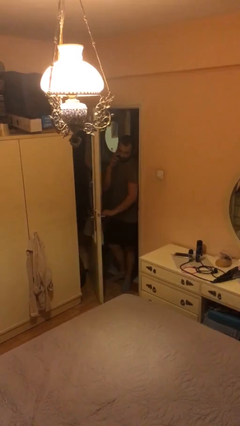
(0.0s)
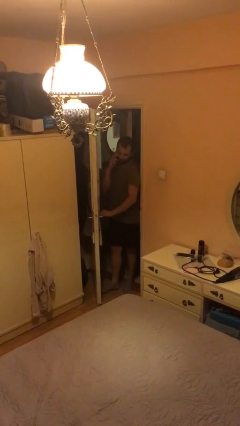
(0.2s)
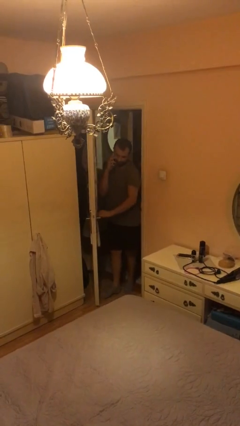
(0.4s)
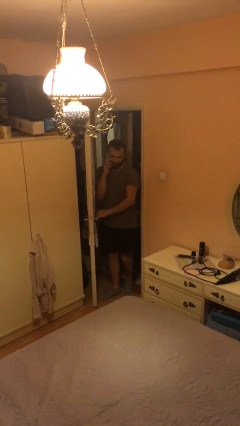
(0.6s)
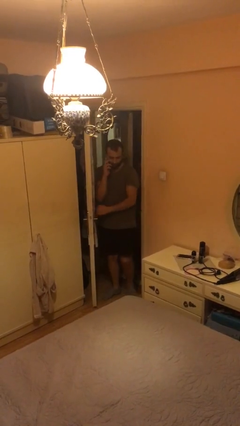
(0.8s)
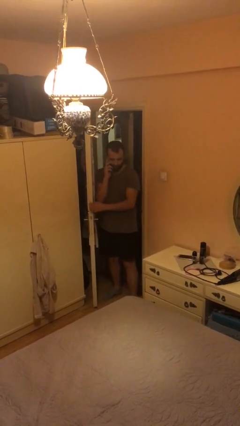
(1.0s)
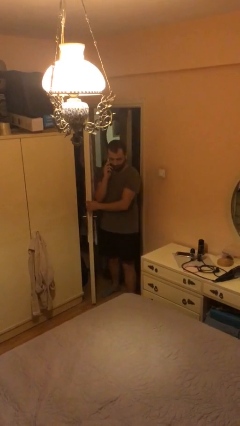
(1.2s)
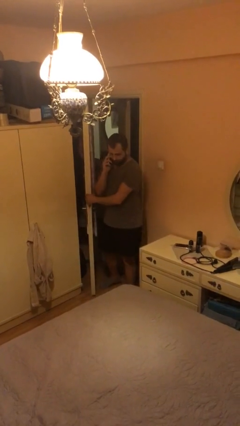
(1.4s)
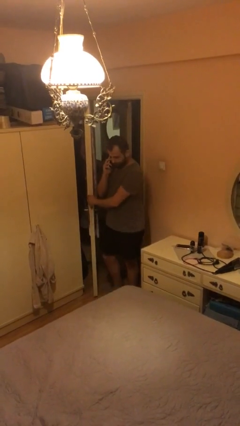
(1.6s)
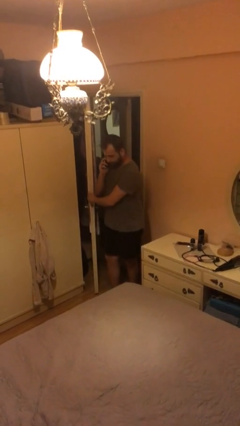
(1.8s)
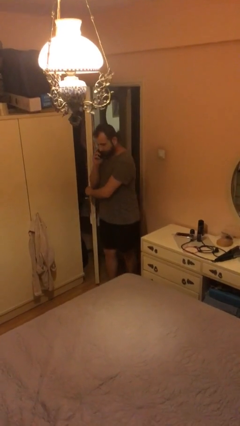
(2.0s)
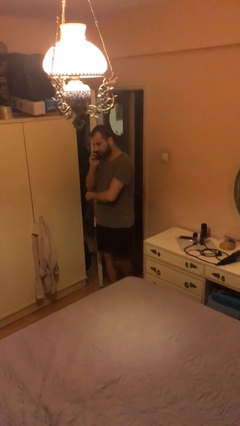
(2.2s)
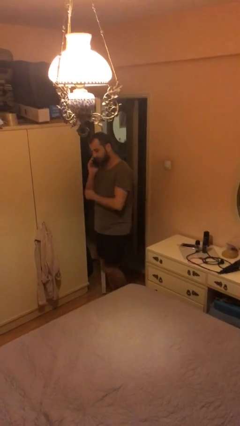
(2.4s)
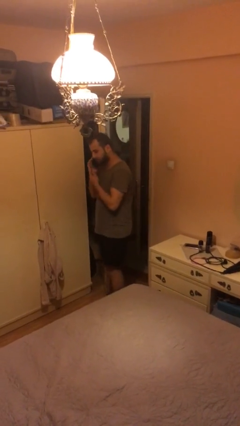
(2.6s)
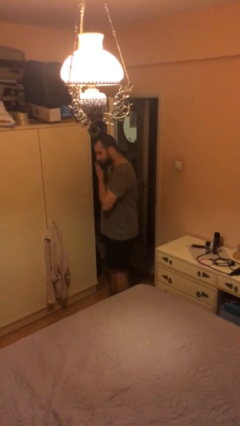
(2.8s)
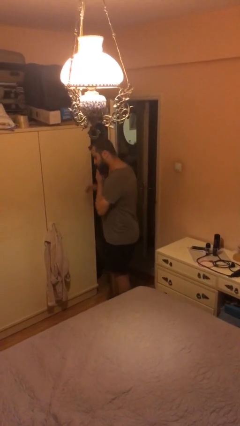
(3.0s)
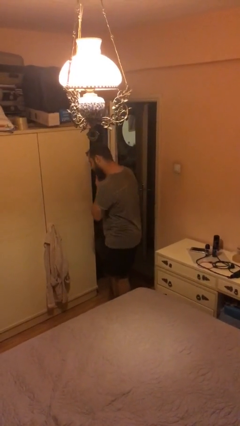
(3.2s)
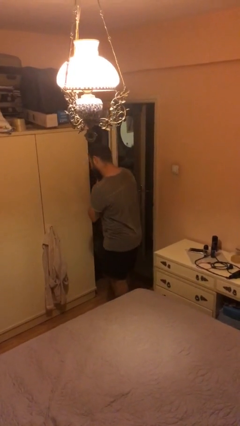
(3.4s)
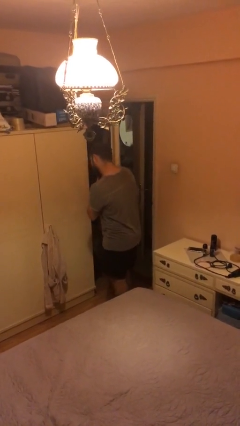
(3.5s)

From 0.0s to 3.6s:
person enters scene through structure

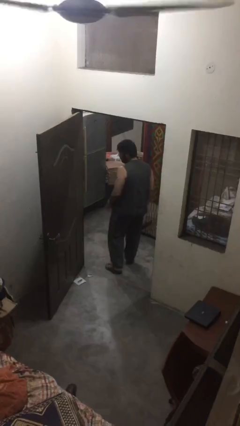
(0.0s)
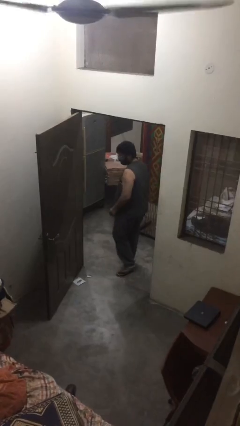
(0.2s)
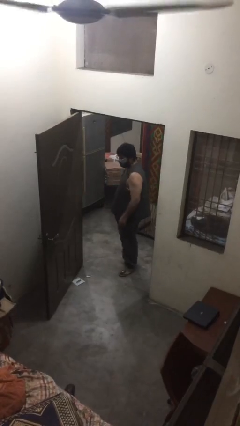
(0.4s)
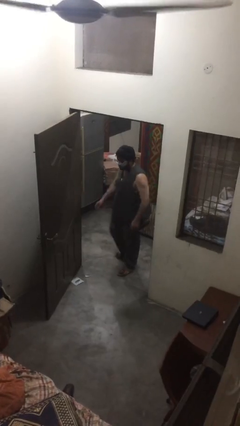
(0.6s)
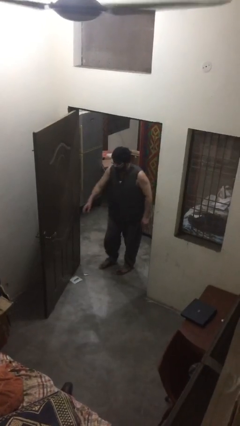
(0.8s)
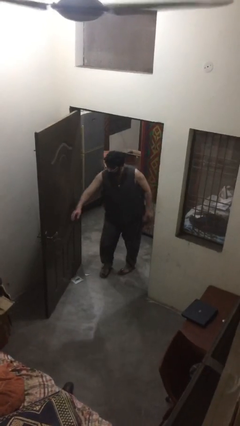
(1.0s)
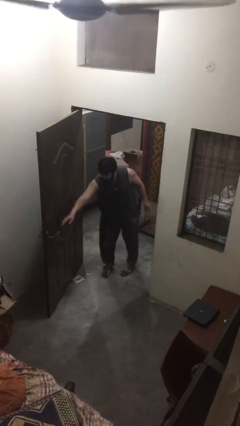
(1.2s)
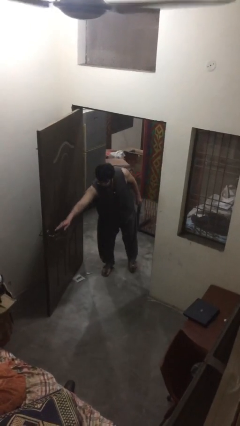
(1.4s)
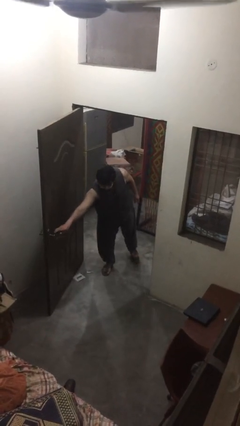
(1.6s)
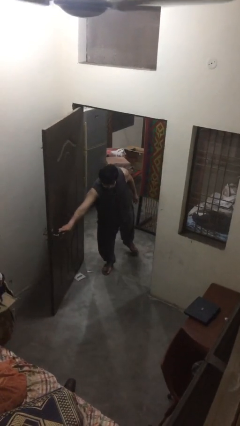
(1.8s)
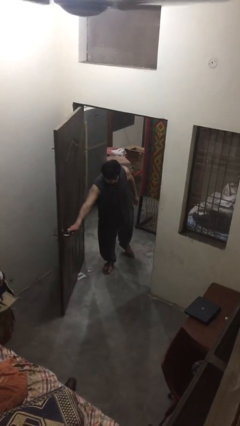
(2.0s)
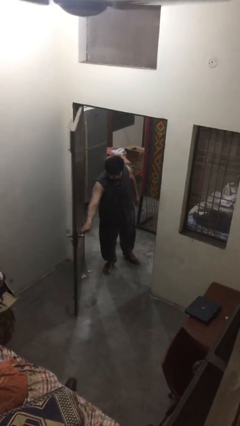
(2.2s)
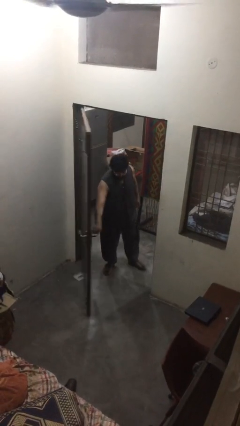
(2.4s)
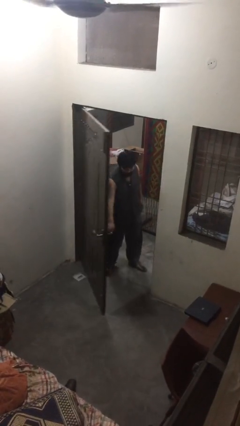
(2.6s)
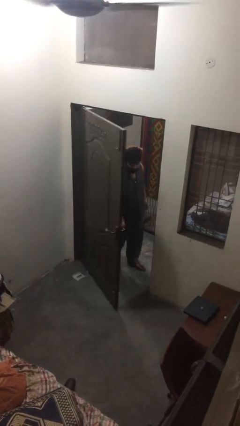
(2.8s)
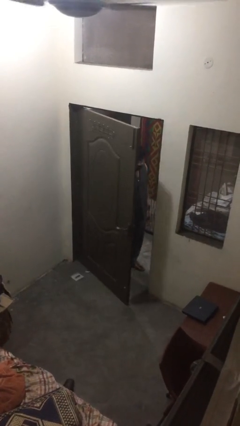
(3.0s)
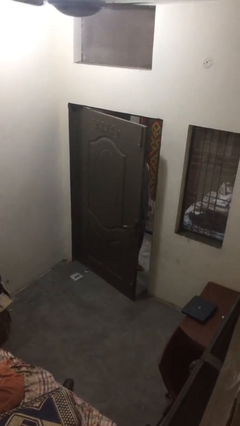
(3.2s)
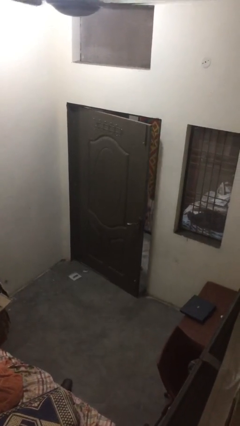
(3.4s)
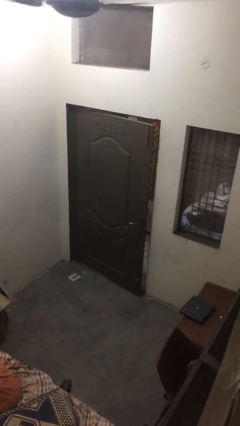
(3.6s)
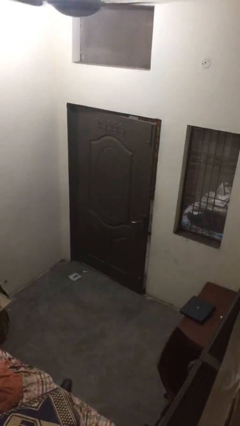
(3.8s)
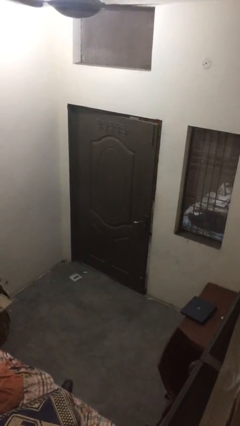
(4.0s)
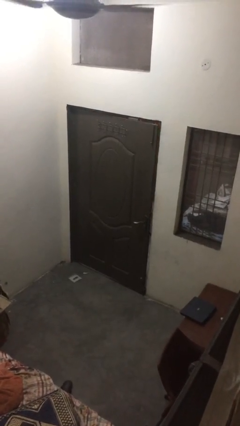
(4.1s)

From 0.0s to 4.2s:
person closes facility door

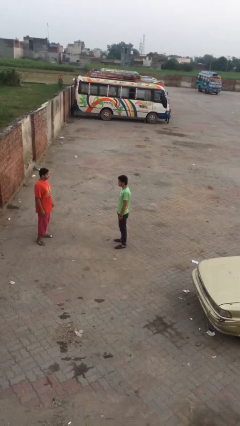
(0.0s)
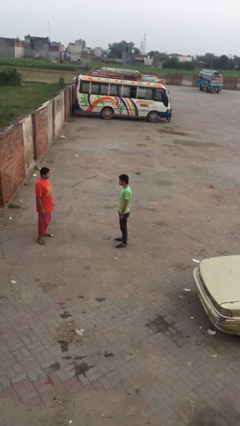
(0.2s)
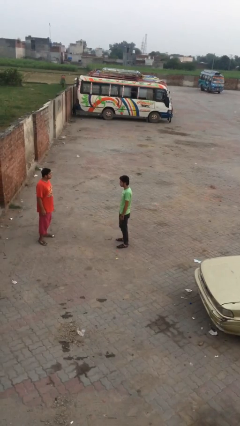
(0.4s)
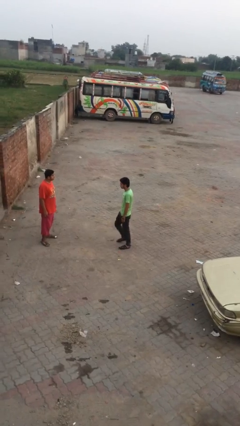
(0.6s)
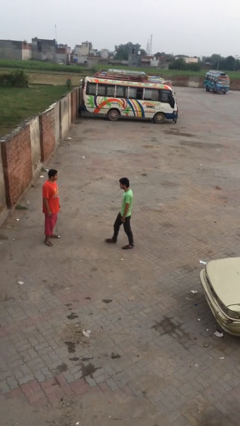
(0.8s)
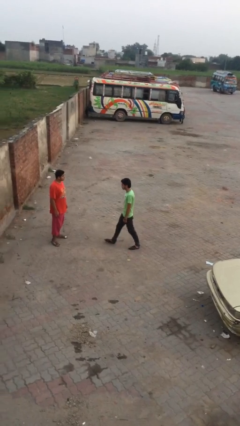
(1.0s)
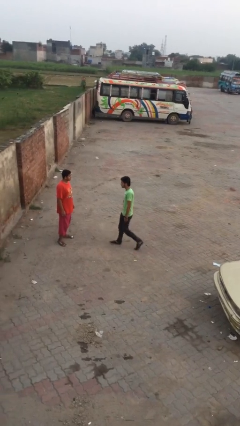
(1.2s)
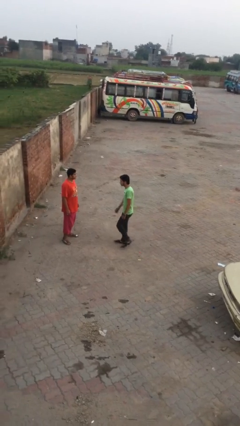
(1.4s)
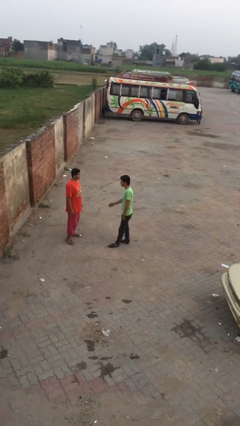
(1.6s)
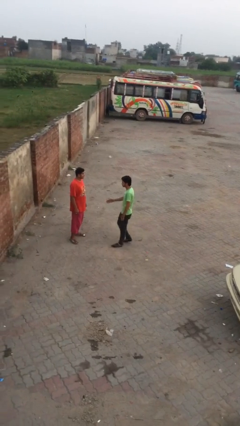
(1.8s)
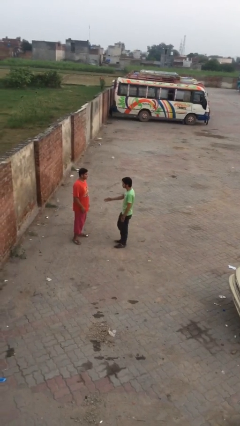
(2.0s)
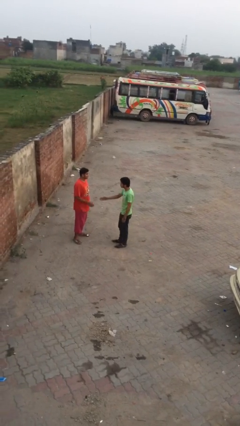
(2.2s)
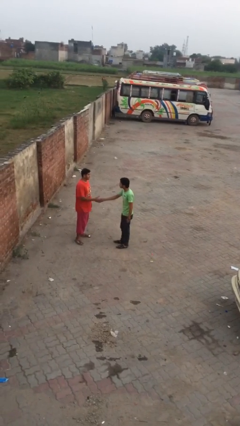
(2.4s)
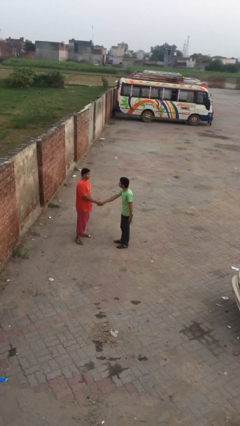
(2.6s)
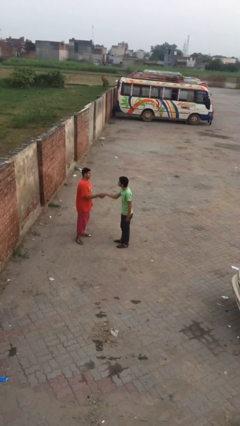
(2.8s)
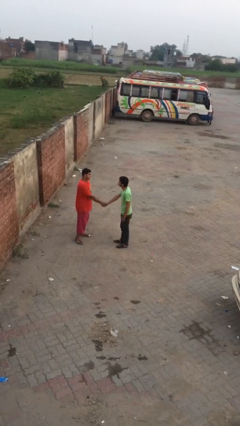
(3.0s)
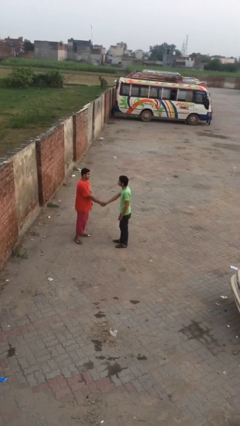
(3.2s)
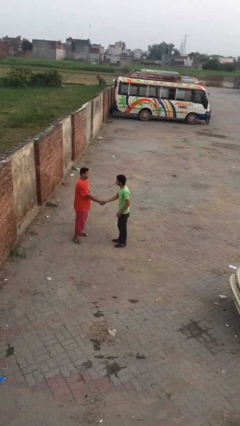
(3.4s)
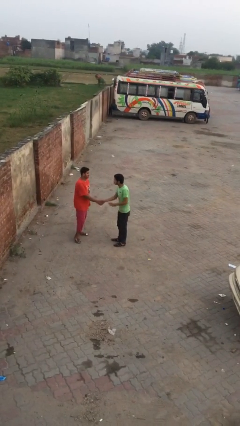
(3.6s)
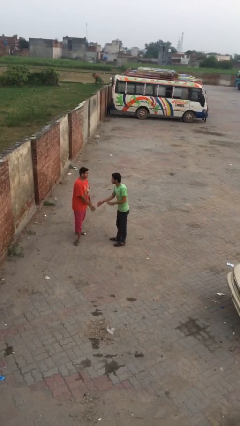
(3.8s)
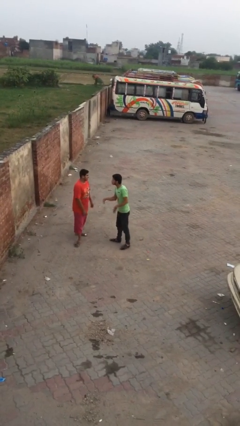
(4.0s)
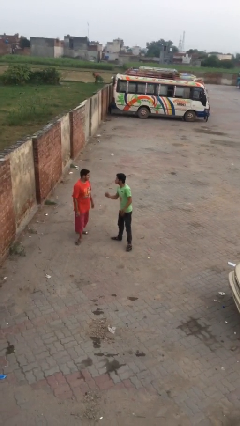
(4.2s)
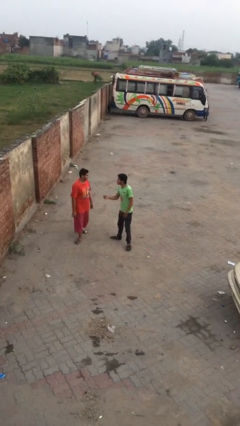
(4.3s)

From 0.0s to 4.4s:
person shakes hand

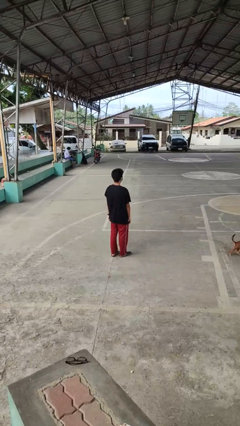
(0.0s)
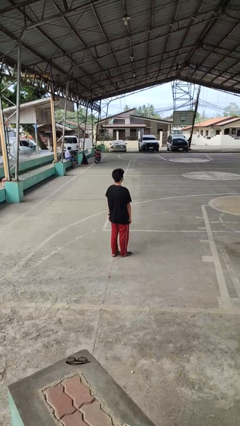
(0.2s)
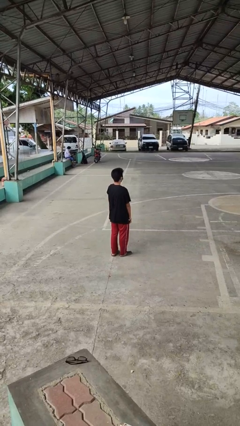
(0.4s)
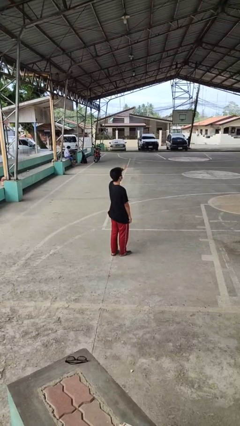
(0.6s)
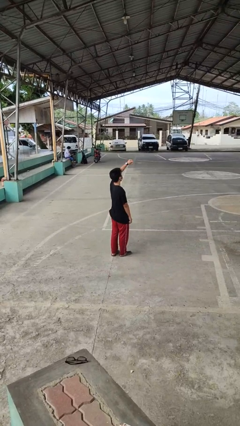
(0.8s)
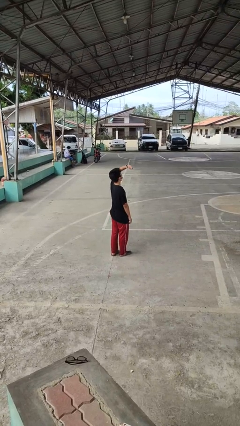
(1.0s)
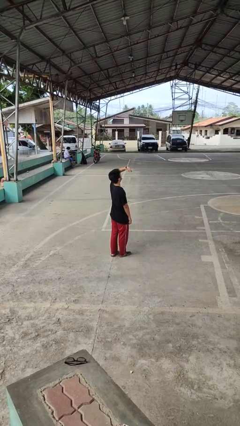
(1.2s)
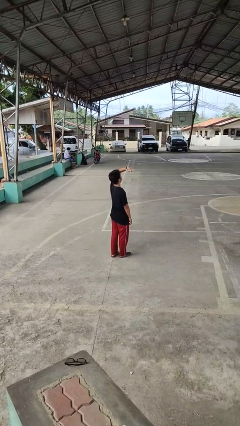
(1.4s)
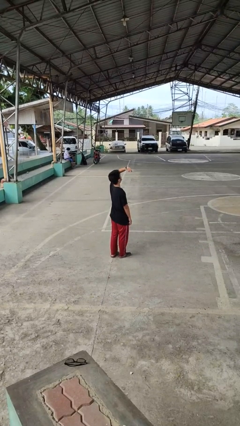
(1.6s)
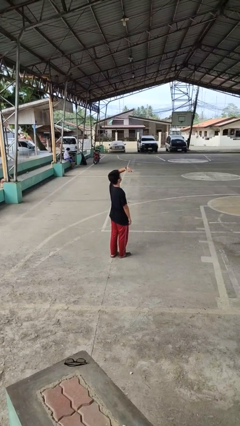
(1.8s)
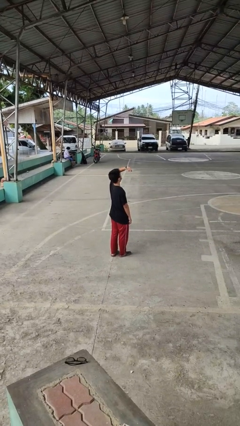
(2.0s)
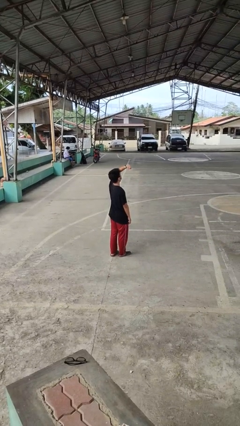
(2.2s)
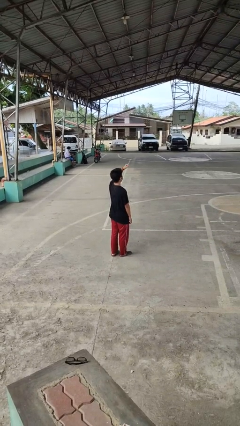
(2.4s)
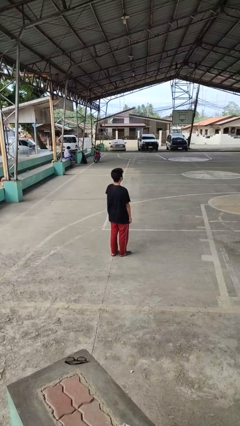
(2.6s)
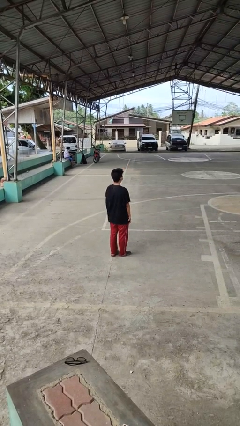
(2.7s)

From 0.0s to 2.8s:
person looks at wristwatch

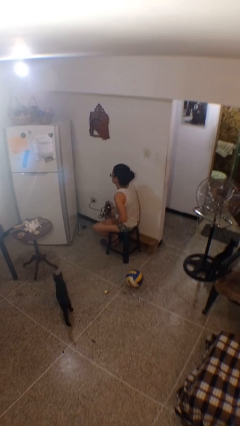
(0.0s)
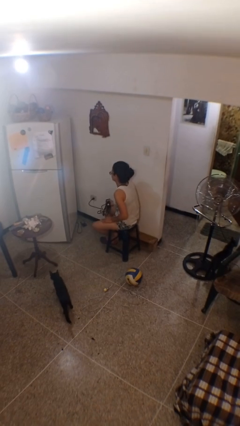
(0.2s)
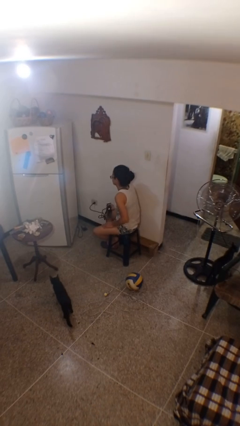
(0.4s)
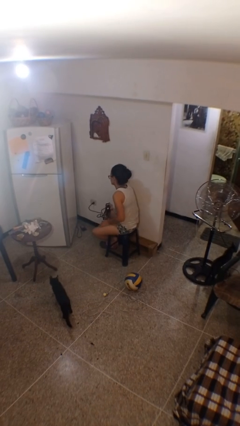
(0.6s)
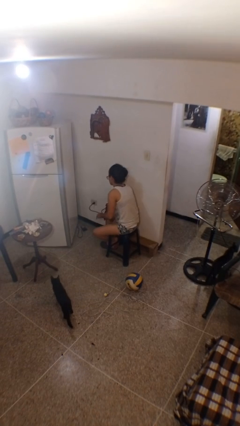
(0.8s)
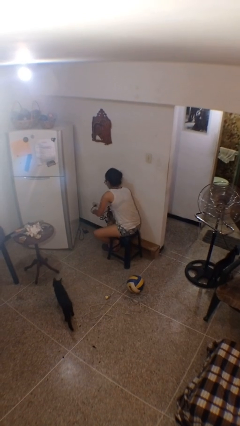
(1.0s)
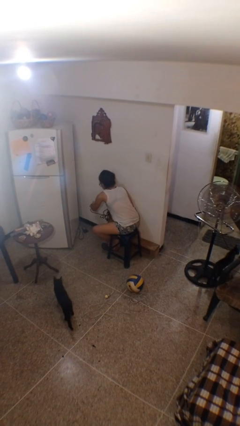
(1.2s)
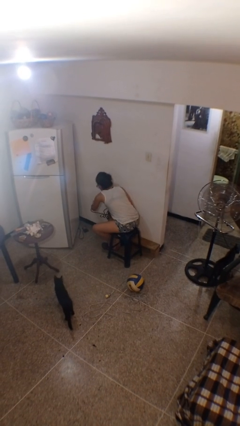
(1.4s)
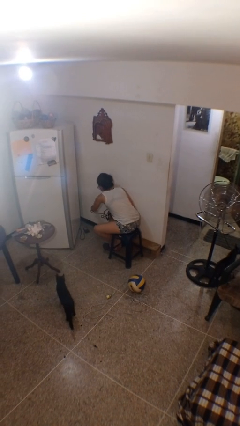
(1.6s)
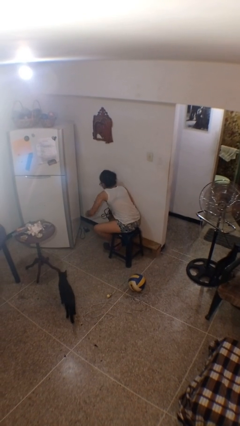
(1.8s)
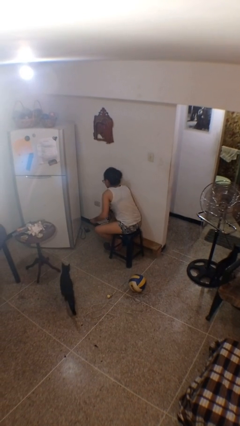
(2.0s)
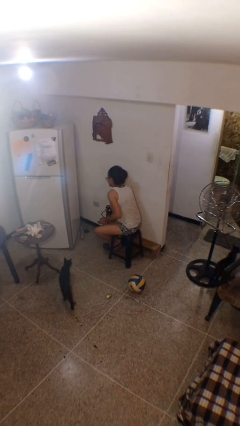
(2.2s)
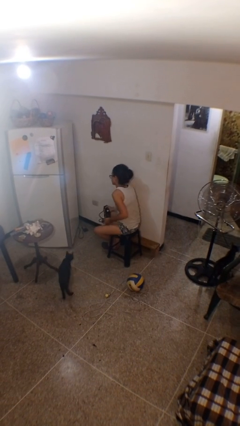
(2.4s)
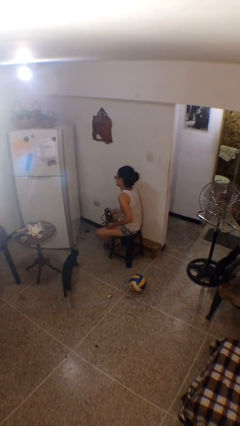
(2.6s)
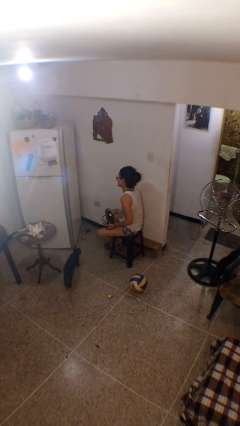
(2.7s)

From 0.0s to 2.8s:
person unplugs from electrical socket
